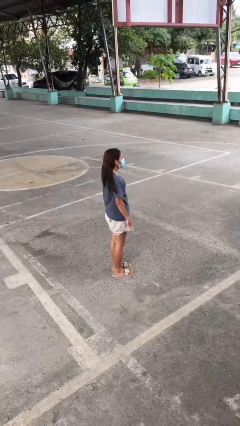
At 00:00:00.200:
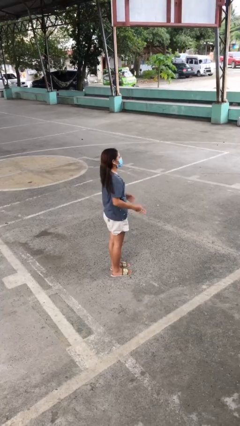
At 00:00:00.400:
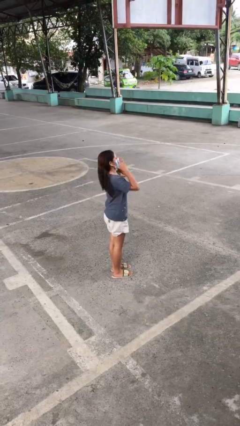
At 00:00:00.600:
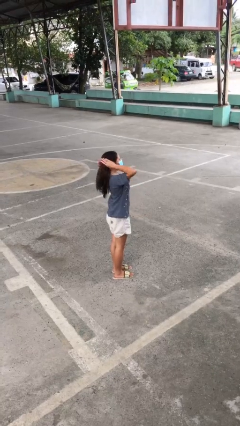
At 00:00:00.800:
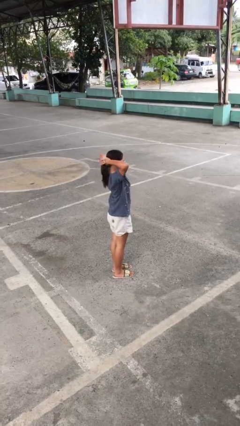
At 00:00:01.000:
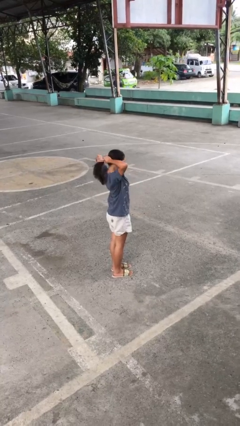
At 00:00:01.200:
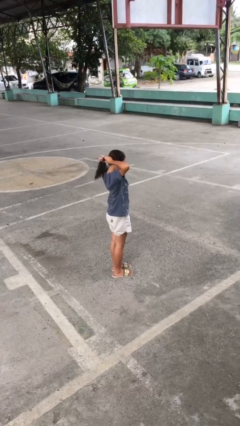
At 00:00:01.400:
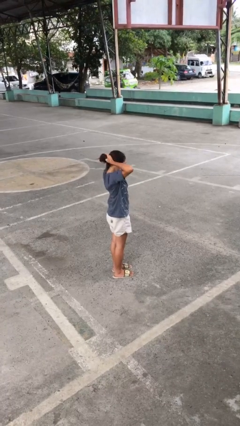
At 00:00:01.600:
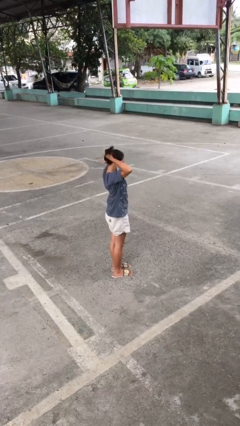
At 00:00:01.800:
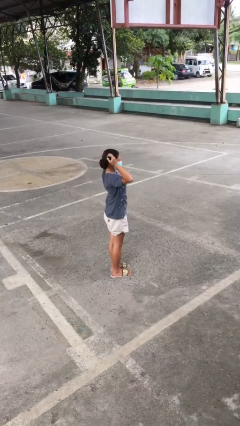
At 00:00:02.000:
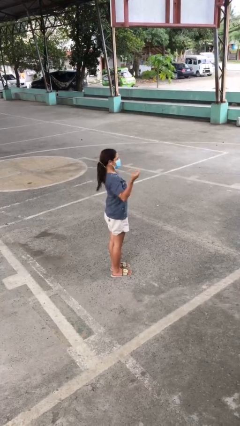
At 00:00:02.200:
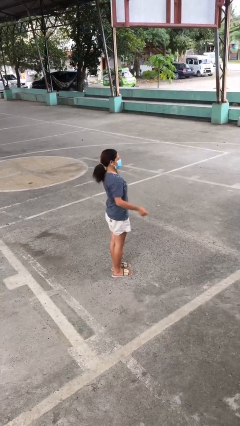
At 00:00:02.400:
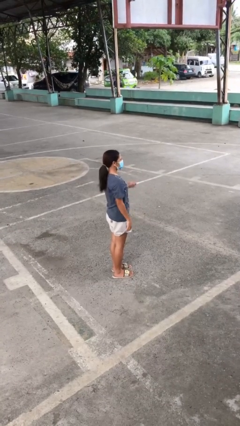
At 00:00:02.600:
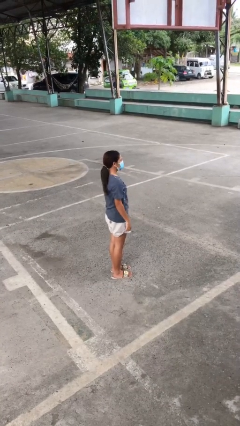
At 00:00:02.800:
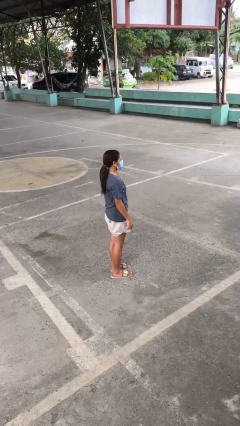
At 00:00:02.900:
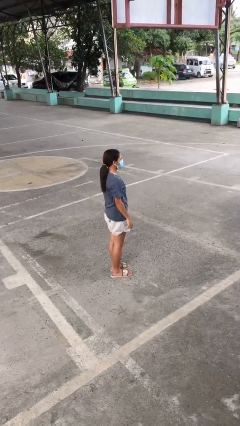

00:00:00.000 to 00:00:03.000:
person puts hair in ponytail

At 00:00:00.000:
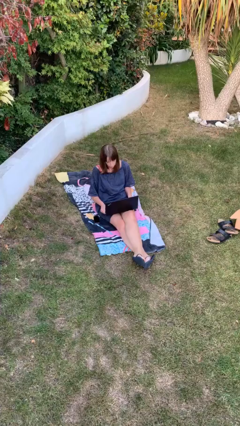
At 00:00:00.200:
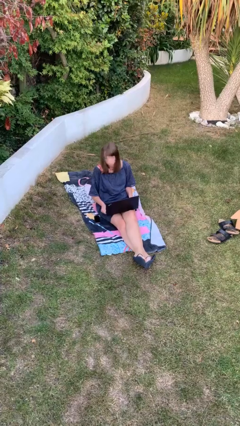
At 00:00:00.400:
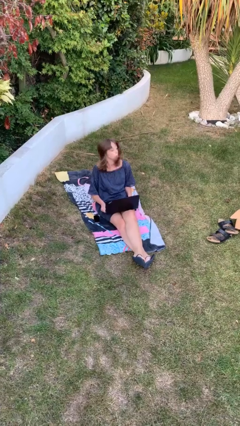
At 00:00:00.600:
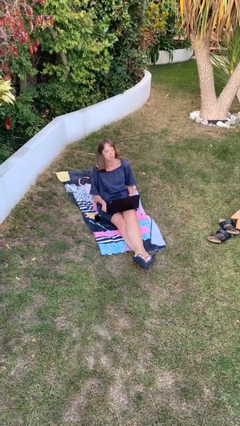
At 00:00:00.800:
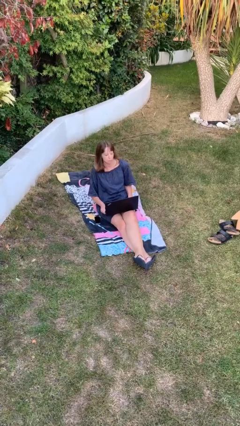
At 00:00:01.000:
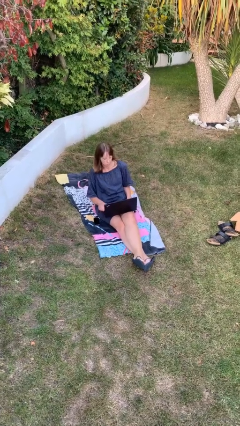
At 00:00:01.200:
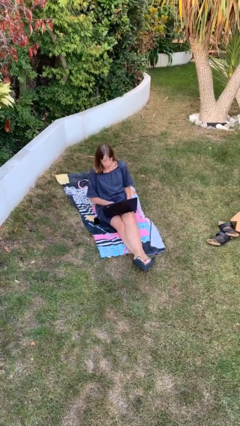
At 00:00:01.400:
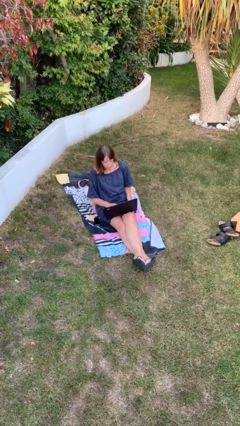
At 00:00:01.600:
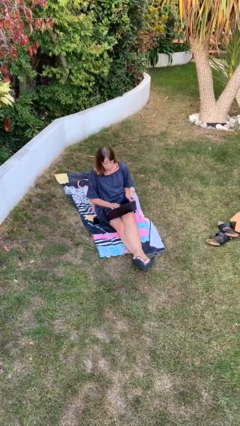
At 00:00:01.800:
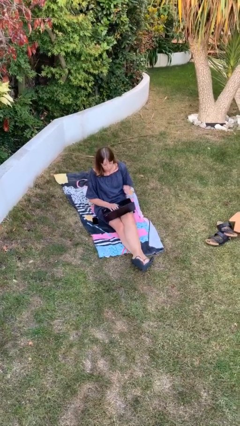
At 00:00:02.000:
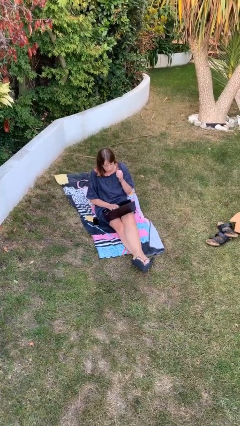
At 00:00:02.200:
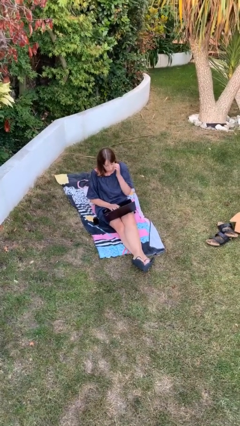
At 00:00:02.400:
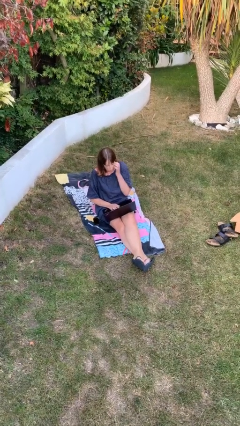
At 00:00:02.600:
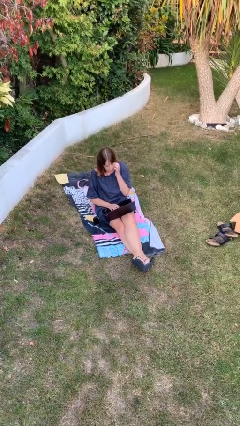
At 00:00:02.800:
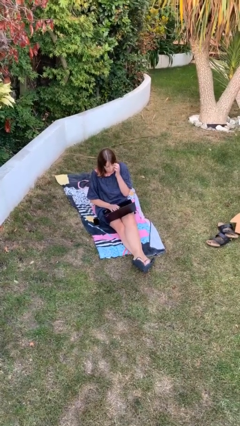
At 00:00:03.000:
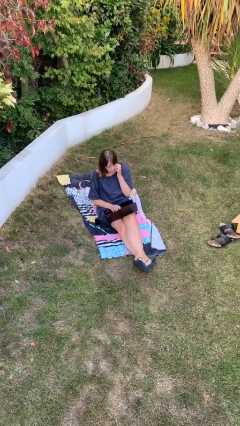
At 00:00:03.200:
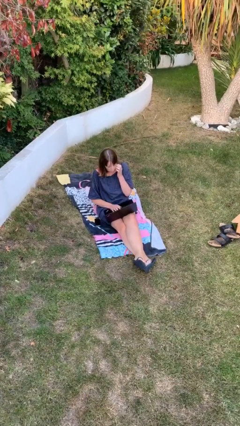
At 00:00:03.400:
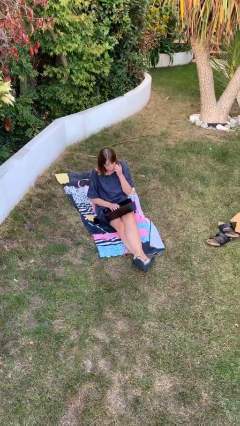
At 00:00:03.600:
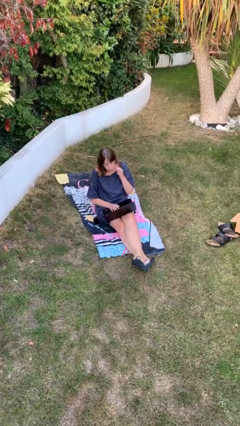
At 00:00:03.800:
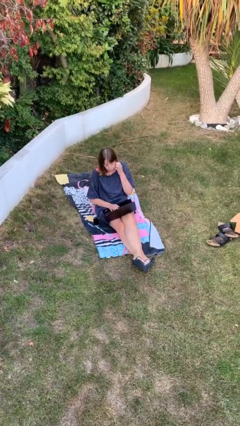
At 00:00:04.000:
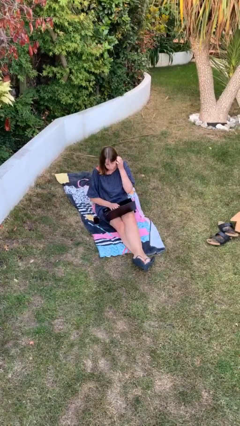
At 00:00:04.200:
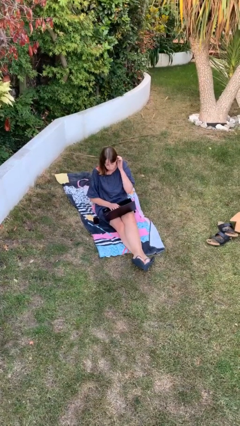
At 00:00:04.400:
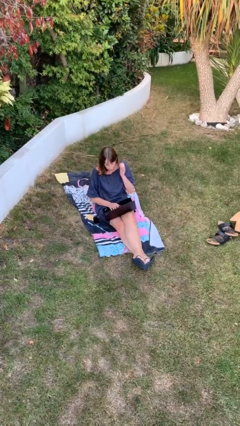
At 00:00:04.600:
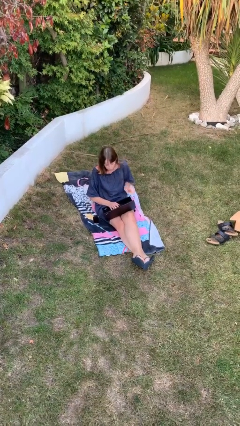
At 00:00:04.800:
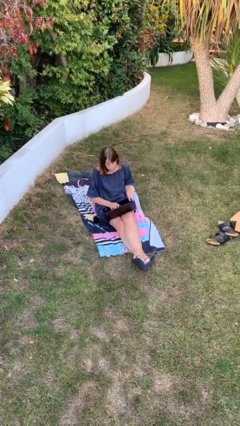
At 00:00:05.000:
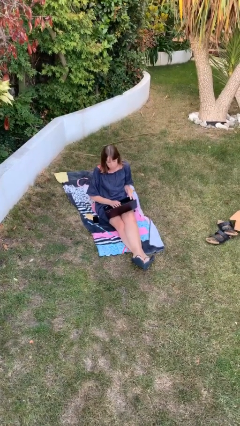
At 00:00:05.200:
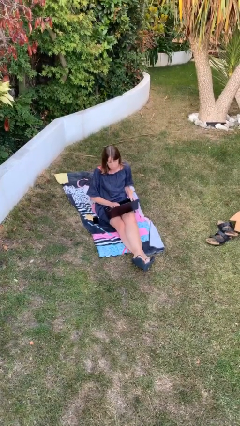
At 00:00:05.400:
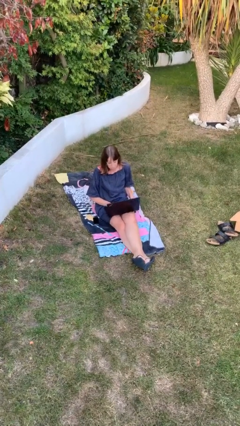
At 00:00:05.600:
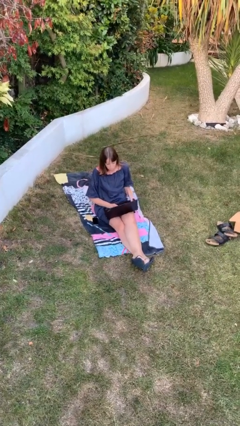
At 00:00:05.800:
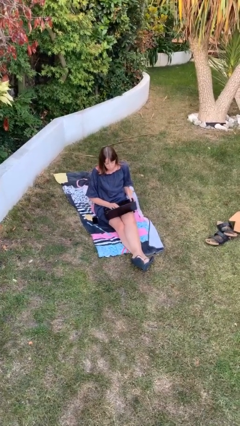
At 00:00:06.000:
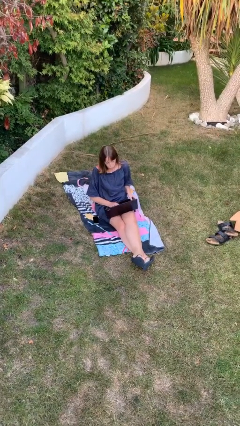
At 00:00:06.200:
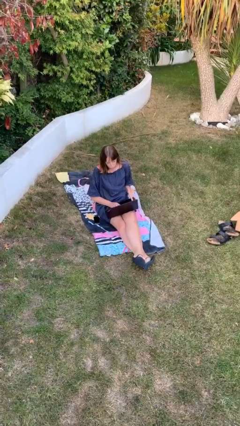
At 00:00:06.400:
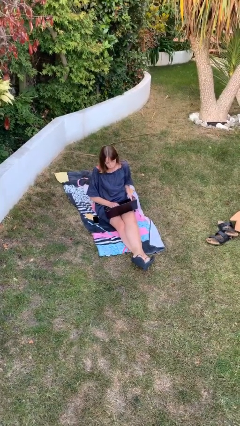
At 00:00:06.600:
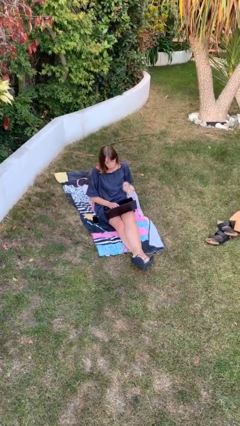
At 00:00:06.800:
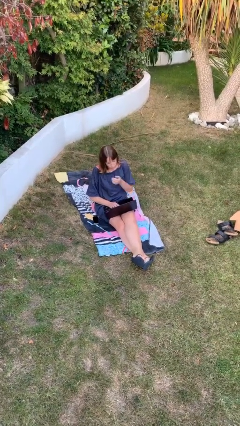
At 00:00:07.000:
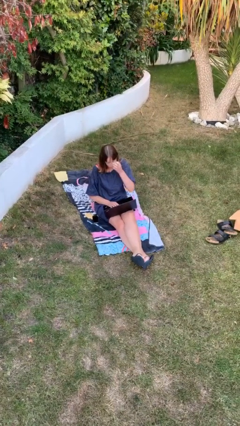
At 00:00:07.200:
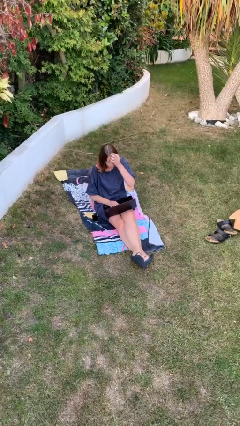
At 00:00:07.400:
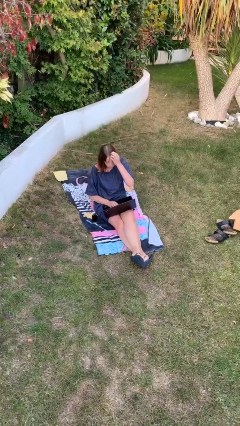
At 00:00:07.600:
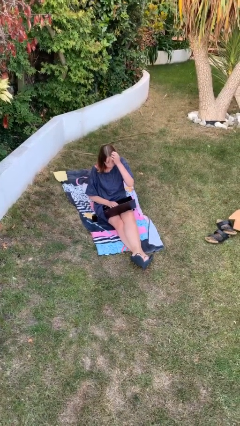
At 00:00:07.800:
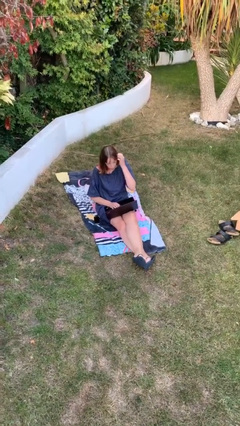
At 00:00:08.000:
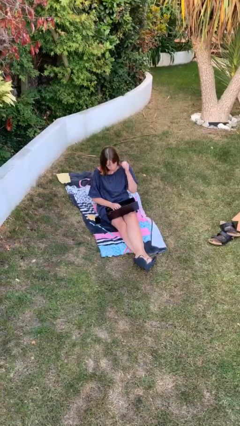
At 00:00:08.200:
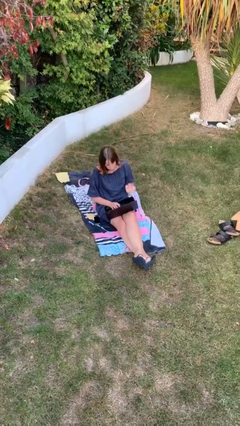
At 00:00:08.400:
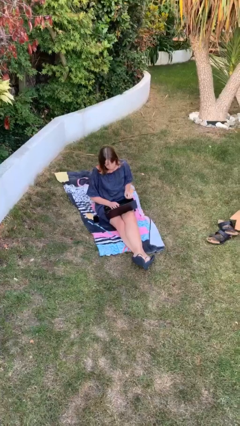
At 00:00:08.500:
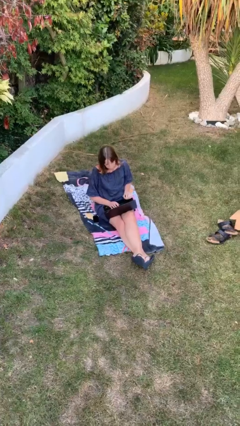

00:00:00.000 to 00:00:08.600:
person interacts with laptop

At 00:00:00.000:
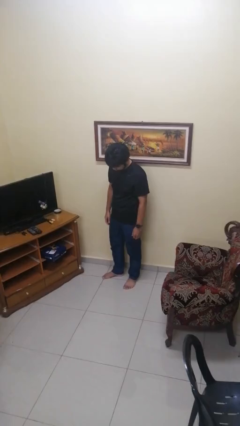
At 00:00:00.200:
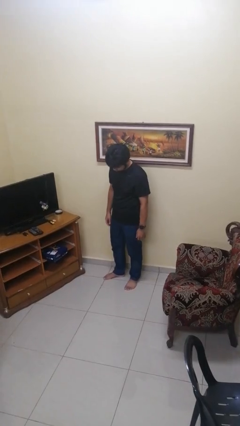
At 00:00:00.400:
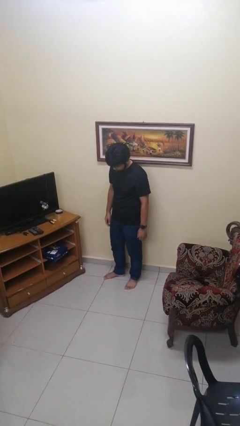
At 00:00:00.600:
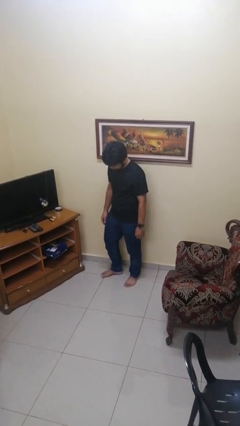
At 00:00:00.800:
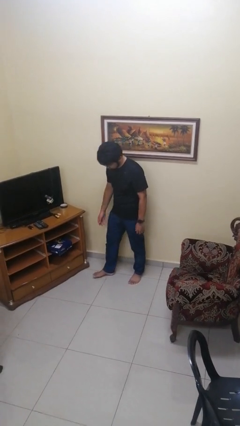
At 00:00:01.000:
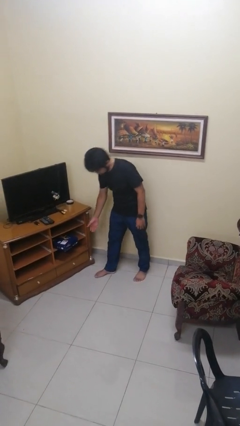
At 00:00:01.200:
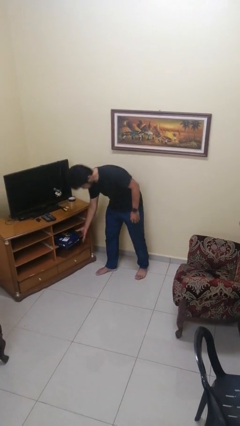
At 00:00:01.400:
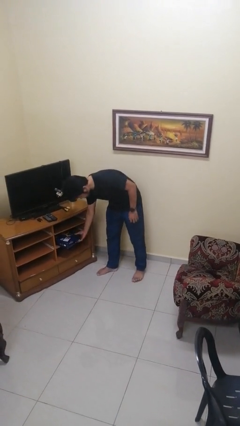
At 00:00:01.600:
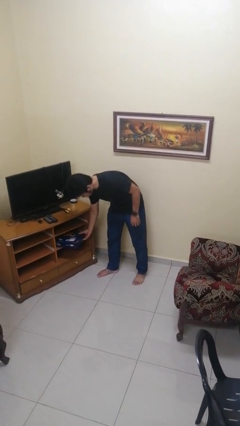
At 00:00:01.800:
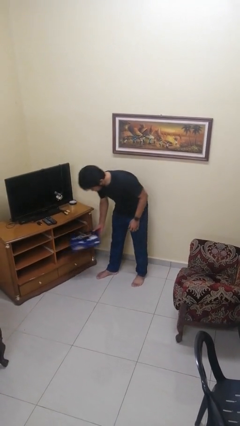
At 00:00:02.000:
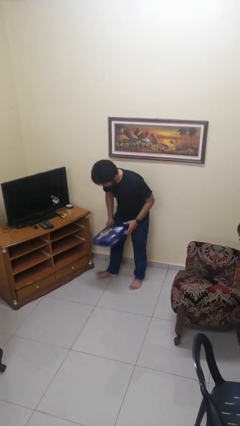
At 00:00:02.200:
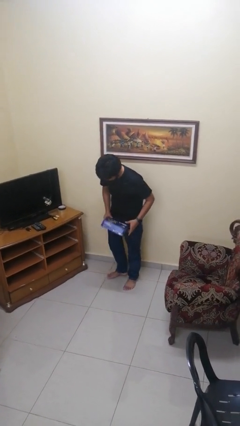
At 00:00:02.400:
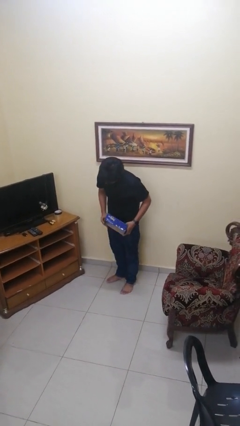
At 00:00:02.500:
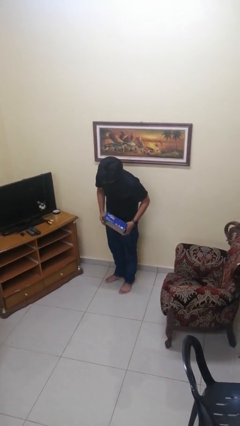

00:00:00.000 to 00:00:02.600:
person picks up object from cabinet

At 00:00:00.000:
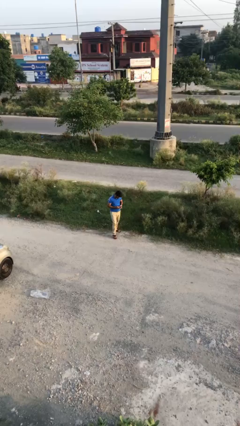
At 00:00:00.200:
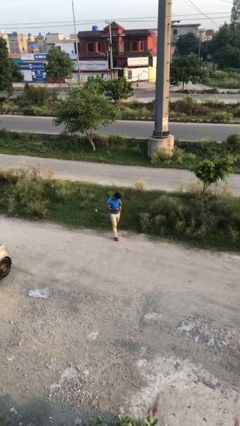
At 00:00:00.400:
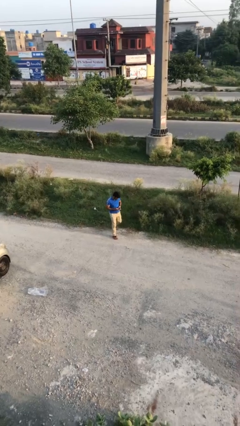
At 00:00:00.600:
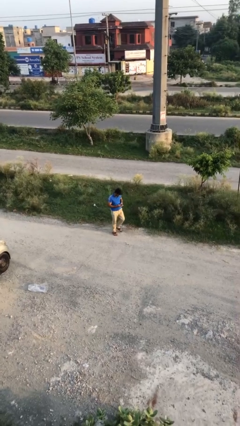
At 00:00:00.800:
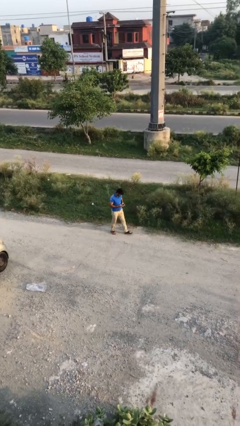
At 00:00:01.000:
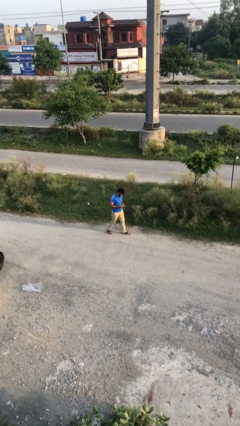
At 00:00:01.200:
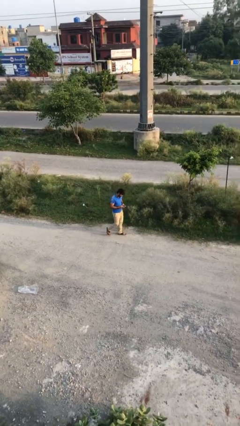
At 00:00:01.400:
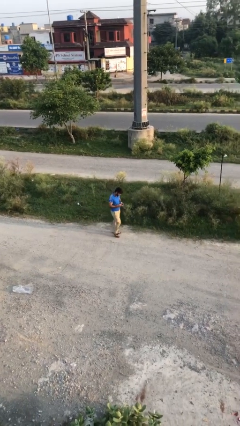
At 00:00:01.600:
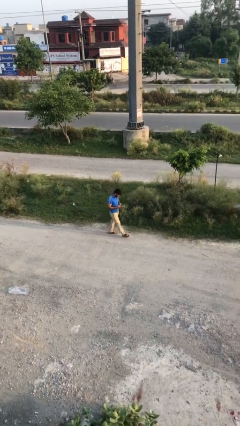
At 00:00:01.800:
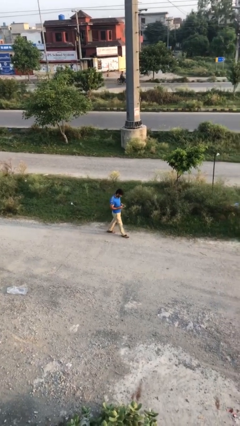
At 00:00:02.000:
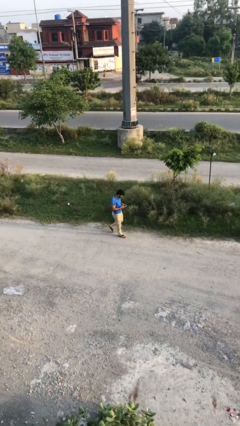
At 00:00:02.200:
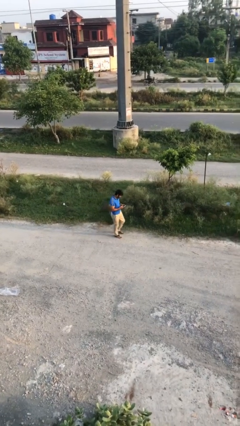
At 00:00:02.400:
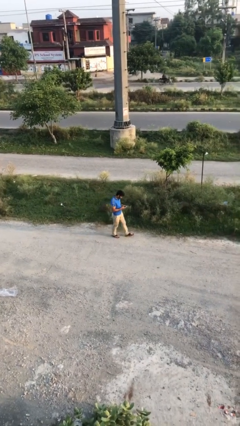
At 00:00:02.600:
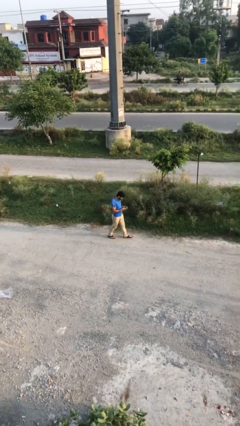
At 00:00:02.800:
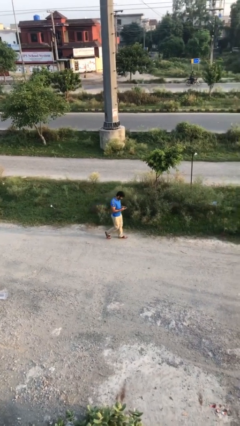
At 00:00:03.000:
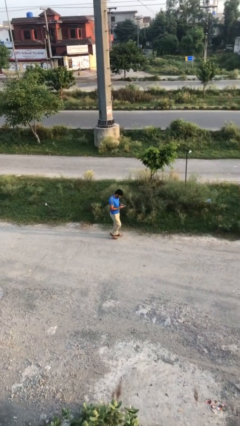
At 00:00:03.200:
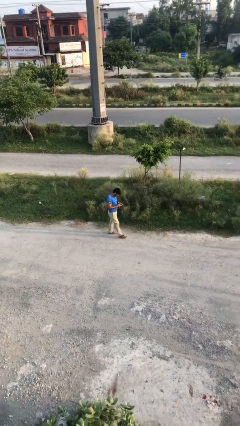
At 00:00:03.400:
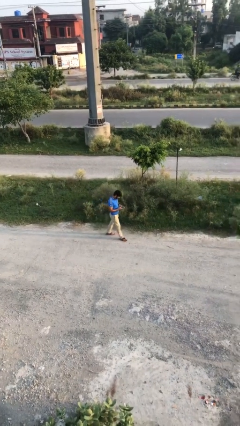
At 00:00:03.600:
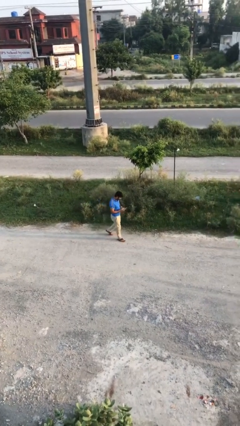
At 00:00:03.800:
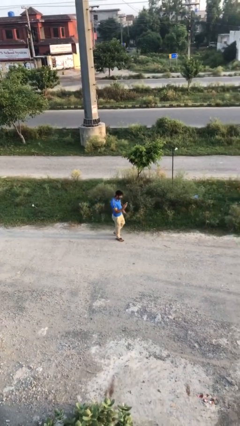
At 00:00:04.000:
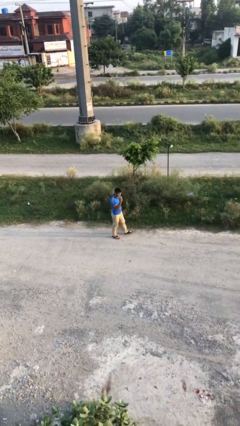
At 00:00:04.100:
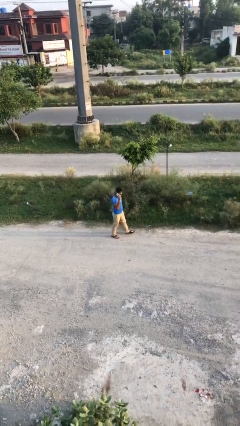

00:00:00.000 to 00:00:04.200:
person texts on phone
